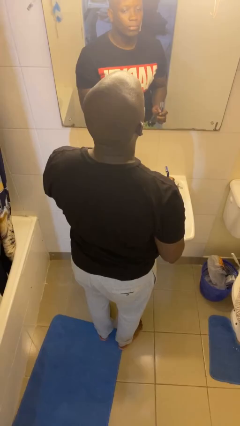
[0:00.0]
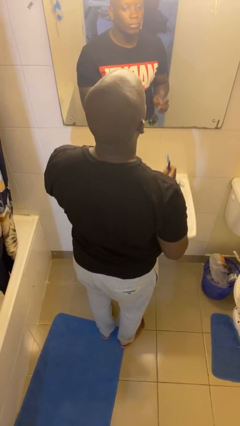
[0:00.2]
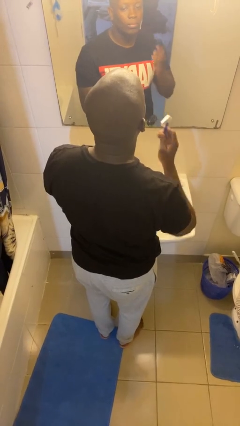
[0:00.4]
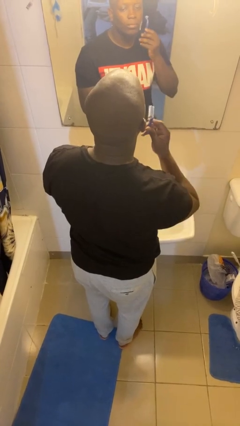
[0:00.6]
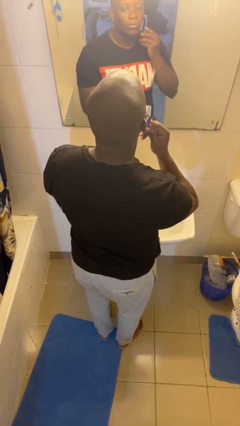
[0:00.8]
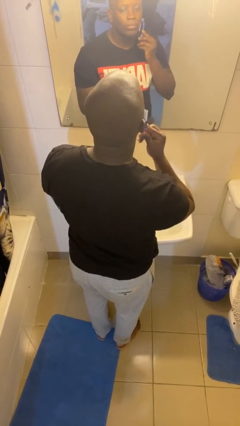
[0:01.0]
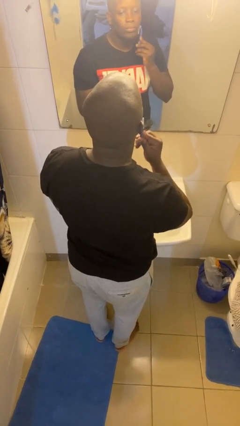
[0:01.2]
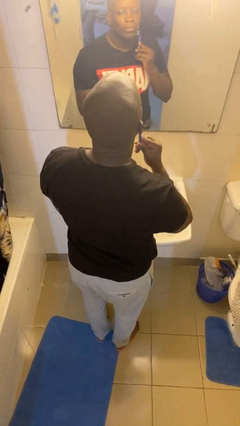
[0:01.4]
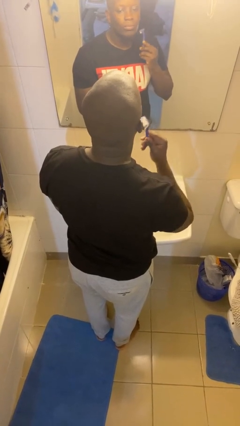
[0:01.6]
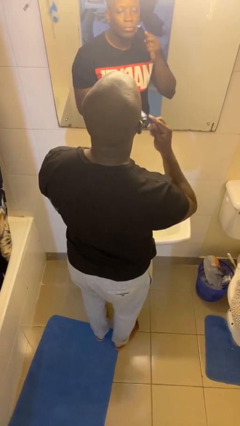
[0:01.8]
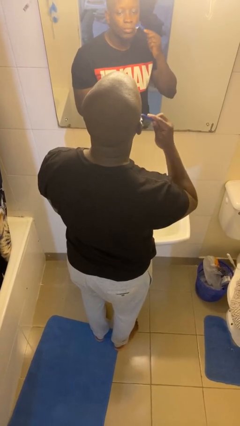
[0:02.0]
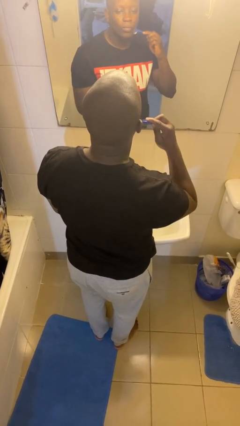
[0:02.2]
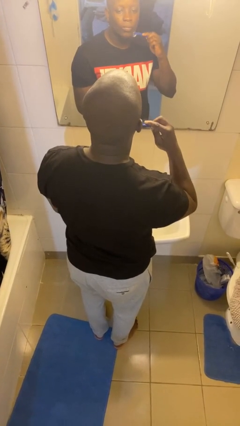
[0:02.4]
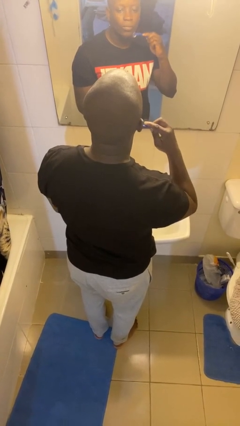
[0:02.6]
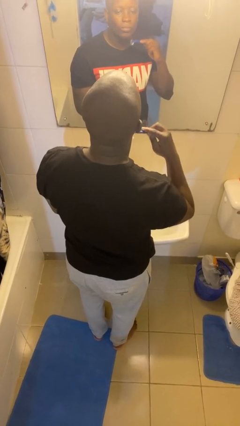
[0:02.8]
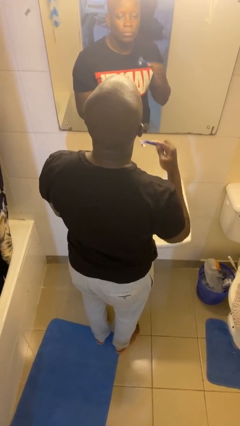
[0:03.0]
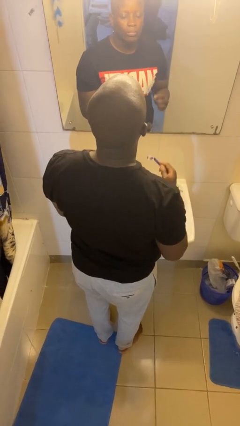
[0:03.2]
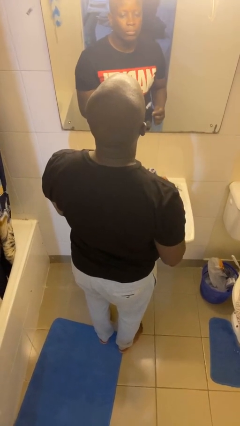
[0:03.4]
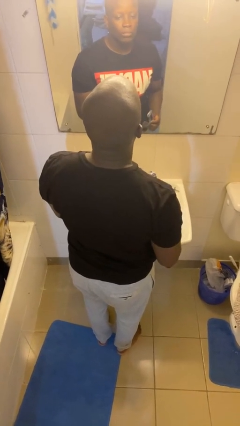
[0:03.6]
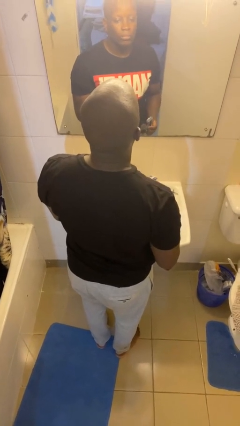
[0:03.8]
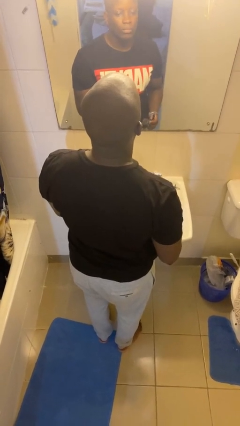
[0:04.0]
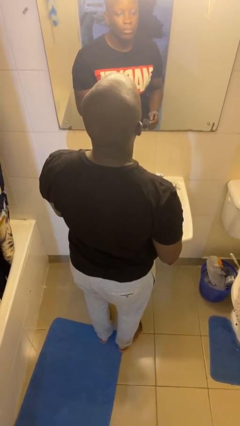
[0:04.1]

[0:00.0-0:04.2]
person shaves face

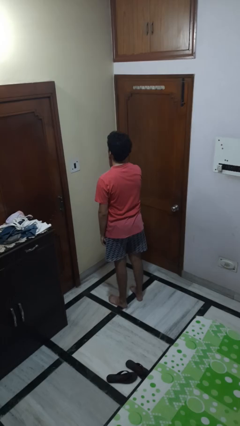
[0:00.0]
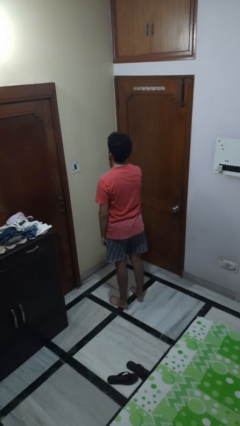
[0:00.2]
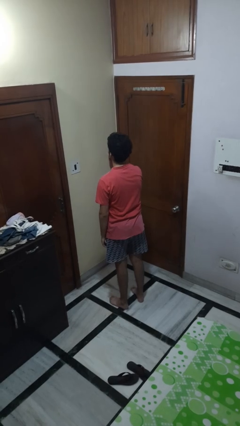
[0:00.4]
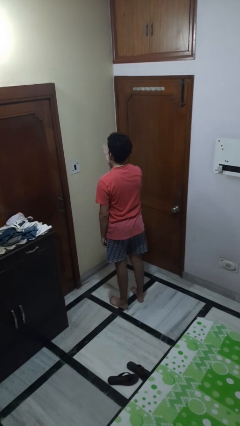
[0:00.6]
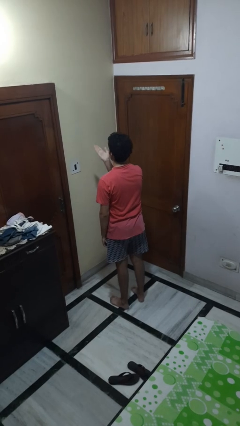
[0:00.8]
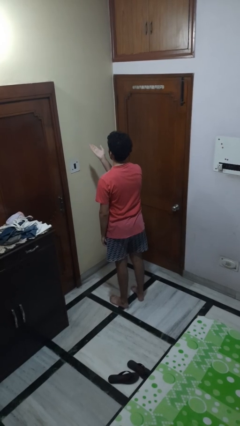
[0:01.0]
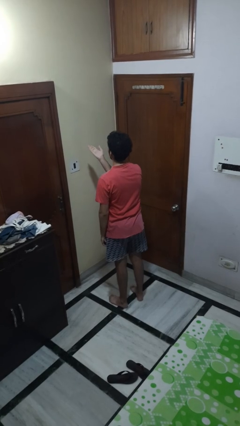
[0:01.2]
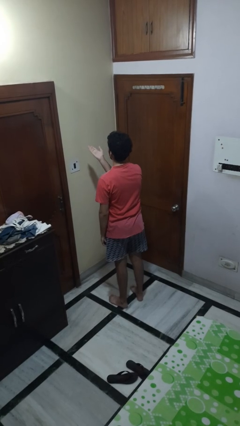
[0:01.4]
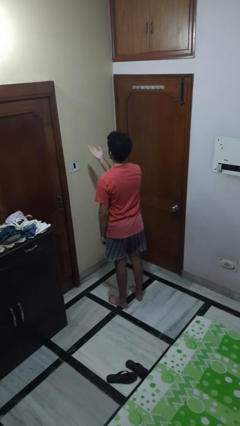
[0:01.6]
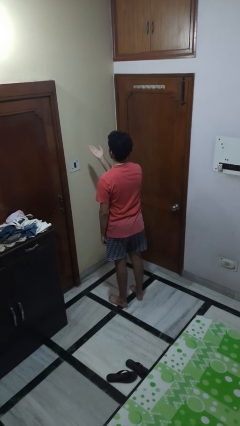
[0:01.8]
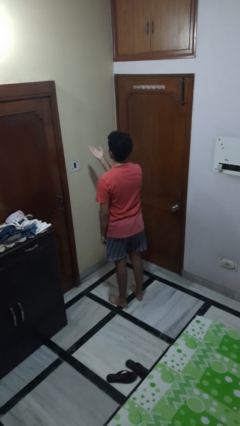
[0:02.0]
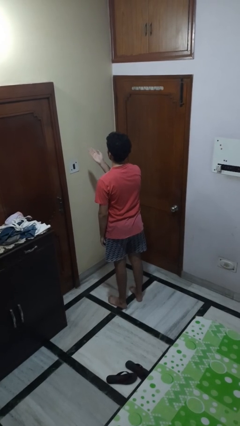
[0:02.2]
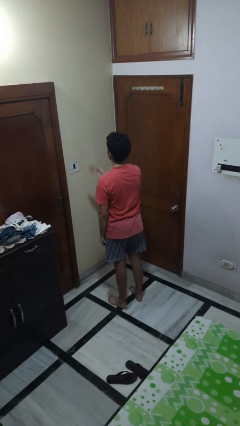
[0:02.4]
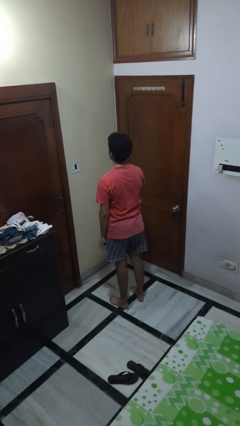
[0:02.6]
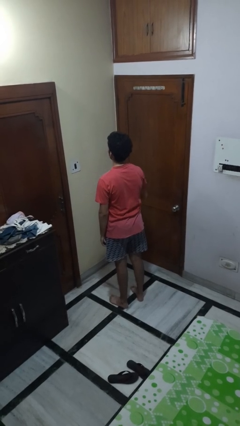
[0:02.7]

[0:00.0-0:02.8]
person gestures blow kiss

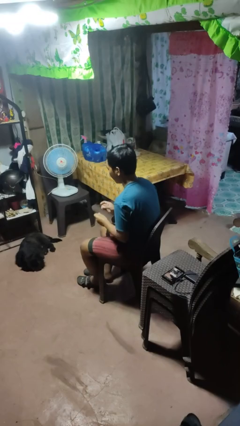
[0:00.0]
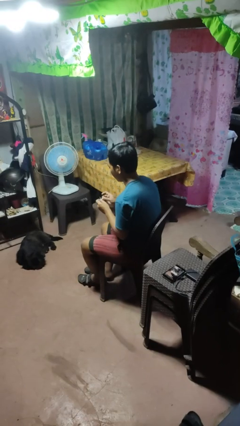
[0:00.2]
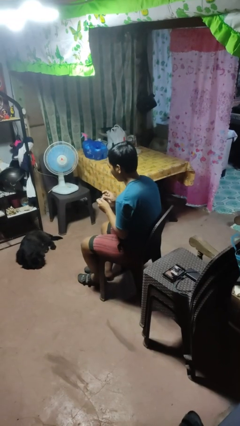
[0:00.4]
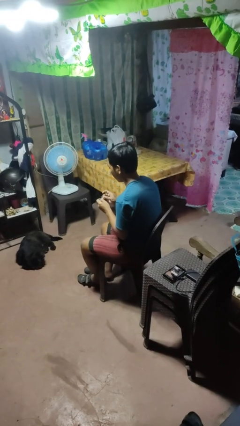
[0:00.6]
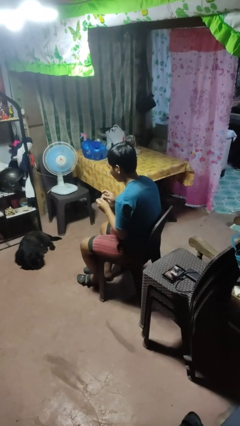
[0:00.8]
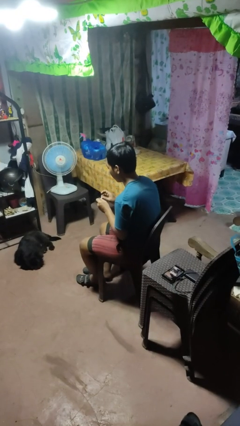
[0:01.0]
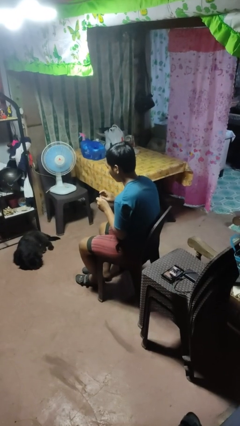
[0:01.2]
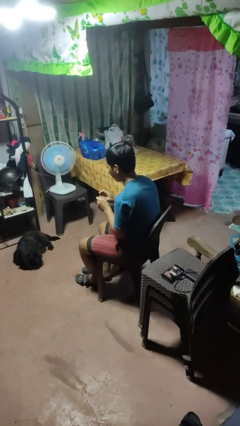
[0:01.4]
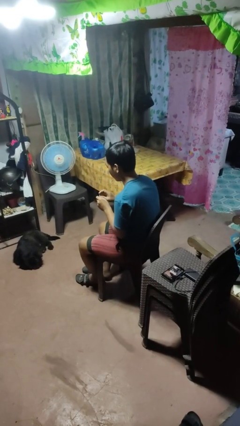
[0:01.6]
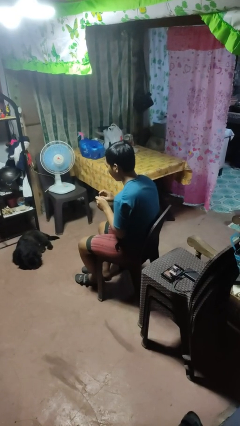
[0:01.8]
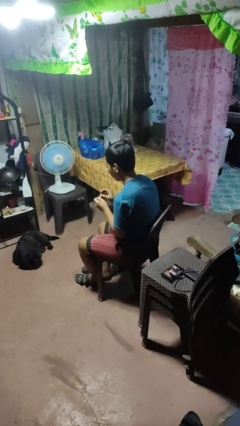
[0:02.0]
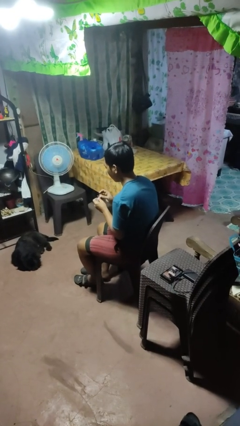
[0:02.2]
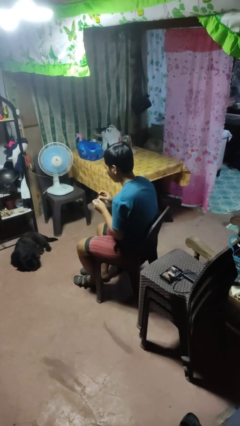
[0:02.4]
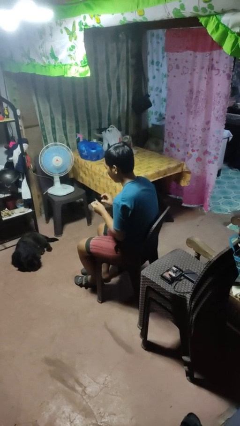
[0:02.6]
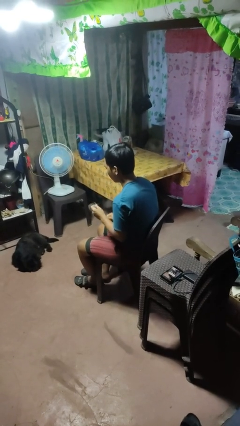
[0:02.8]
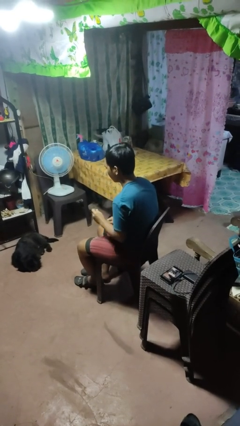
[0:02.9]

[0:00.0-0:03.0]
person files fingernails

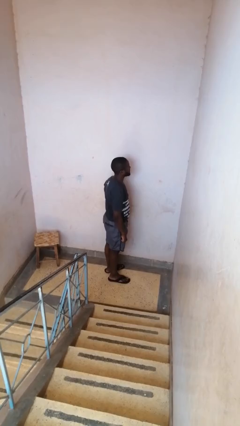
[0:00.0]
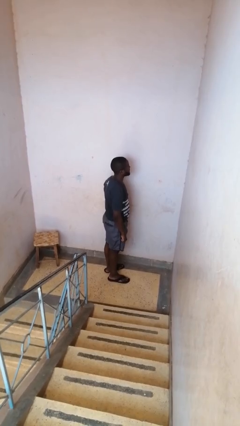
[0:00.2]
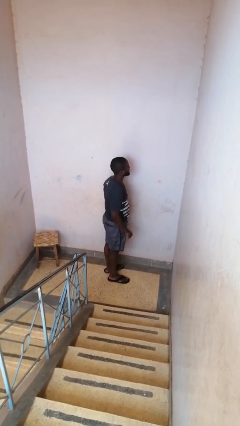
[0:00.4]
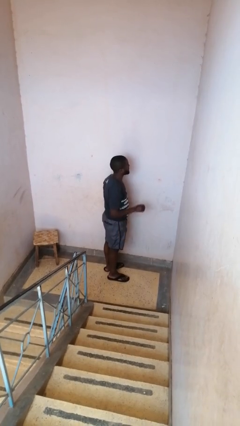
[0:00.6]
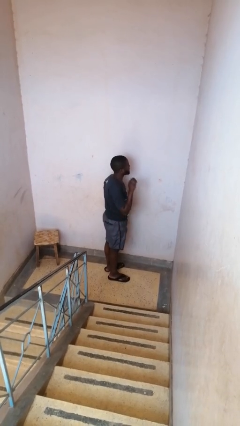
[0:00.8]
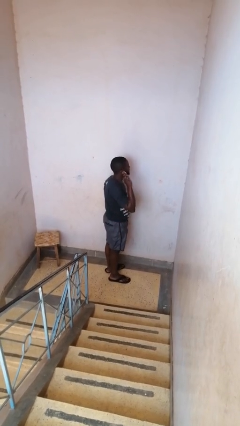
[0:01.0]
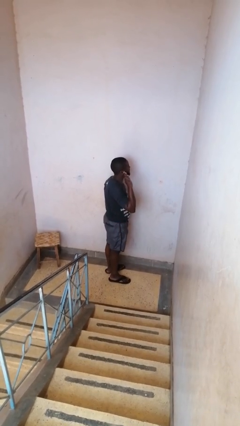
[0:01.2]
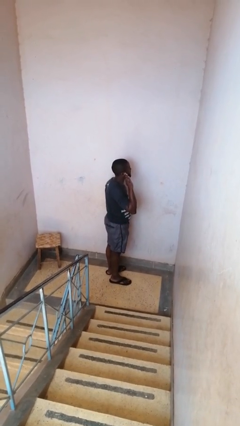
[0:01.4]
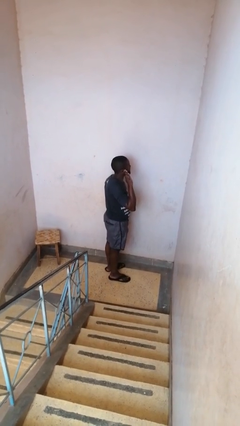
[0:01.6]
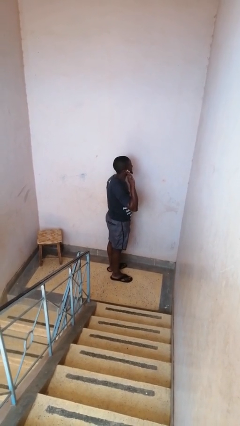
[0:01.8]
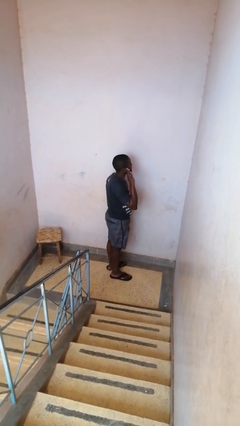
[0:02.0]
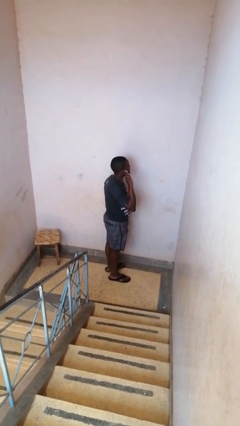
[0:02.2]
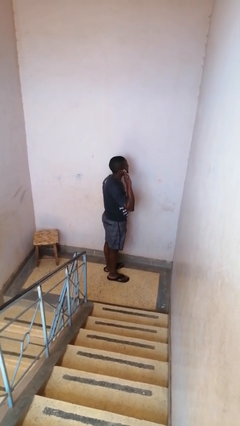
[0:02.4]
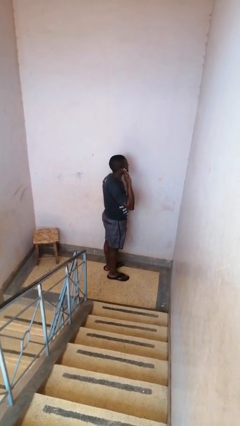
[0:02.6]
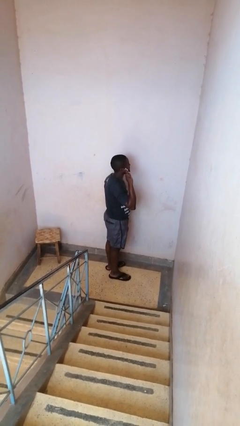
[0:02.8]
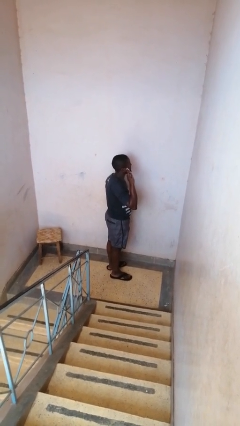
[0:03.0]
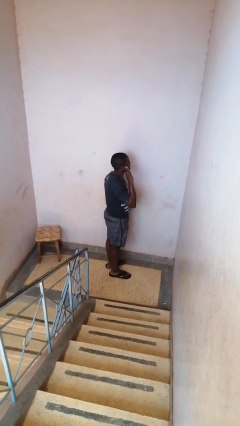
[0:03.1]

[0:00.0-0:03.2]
person salutes

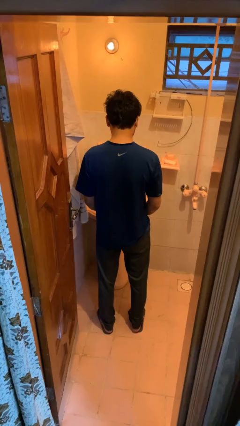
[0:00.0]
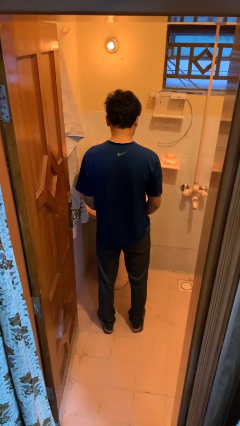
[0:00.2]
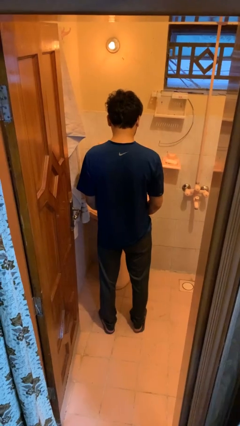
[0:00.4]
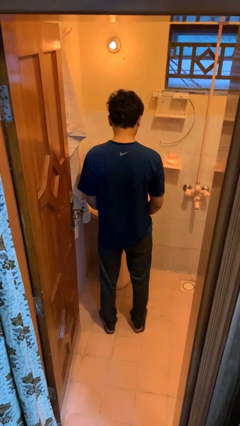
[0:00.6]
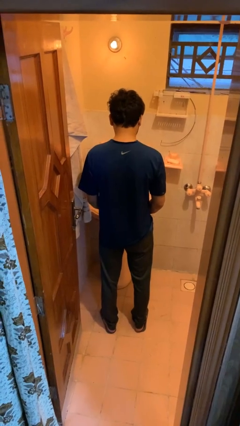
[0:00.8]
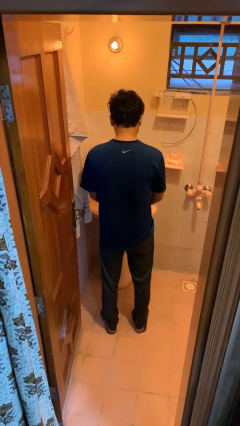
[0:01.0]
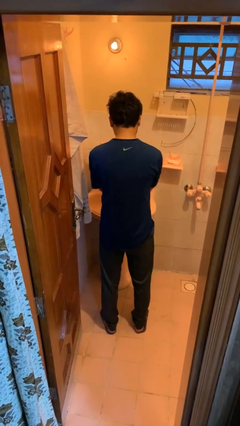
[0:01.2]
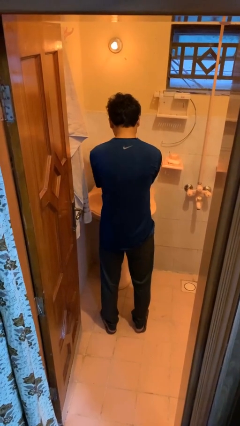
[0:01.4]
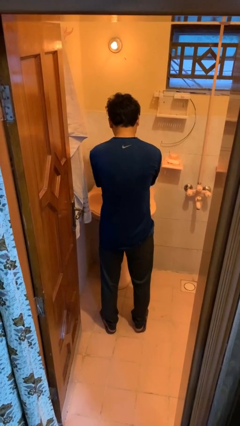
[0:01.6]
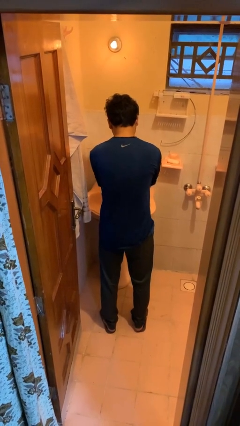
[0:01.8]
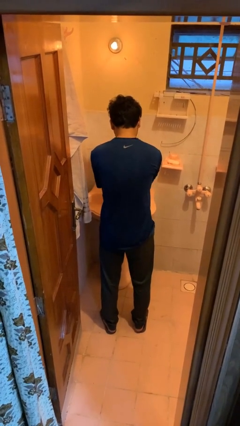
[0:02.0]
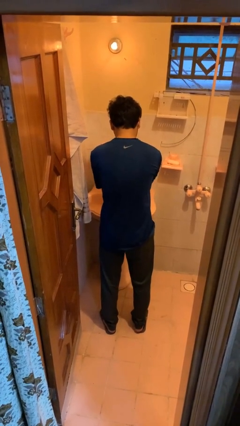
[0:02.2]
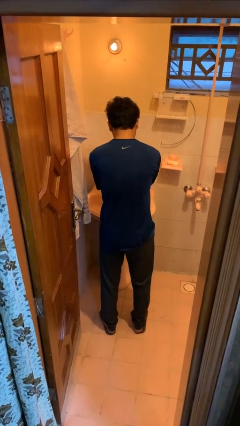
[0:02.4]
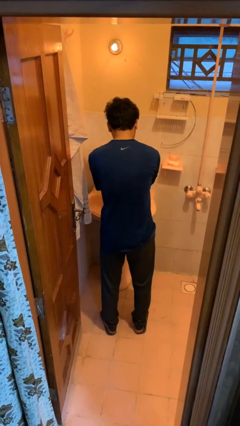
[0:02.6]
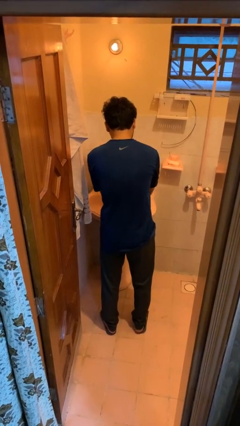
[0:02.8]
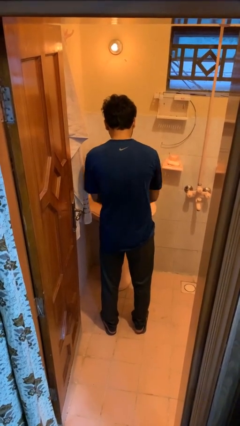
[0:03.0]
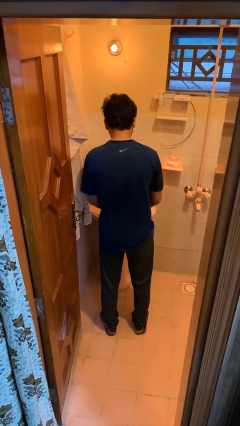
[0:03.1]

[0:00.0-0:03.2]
person washes hands

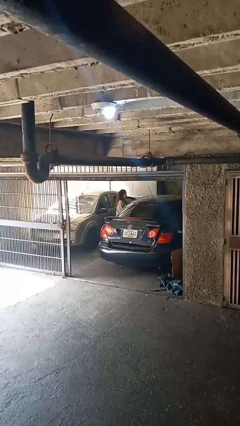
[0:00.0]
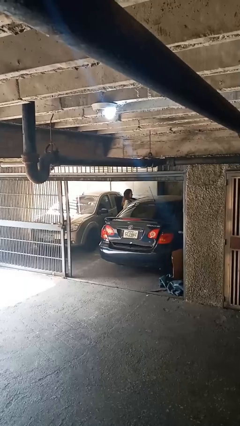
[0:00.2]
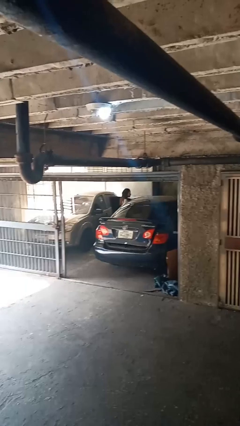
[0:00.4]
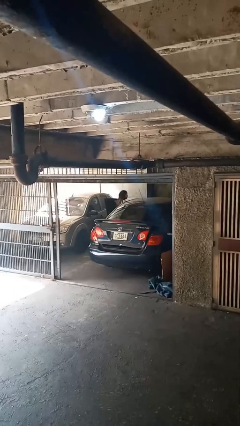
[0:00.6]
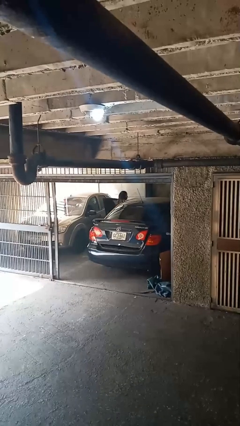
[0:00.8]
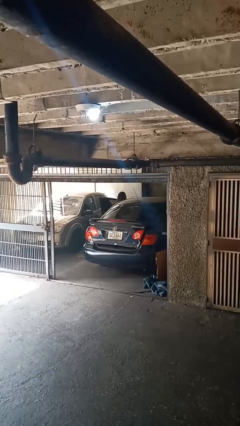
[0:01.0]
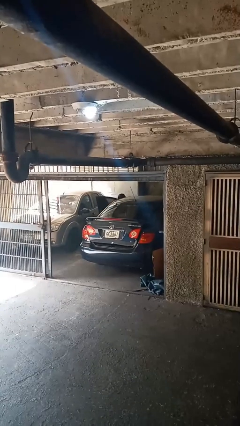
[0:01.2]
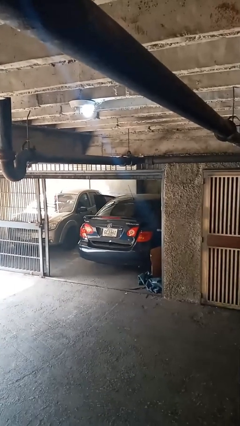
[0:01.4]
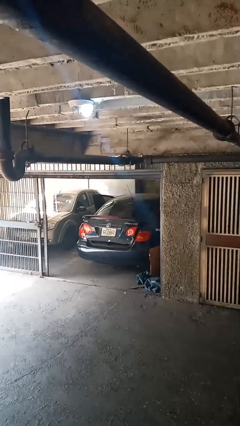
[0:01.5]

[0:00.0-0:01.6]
person enters car
